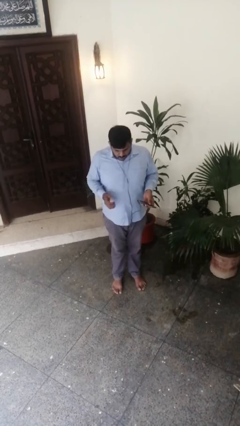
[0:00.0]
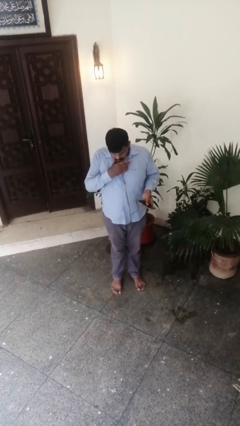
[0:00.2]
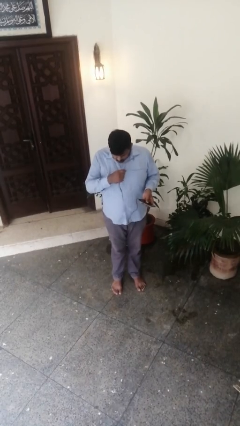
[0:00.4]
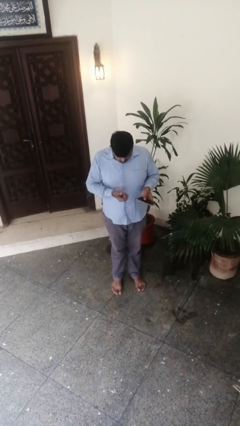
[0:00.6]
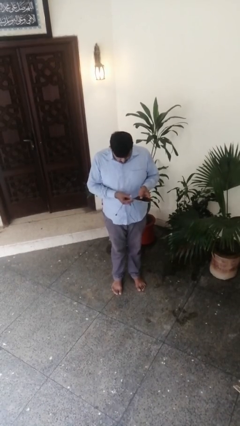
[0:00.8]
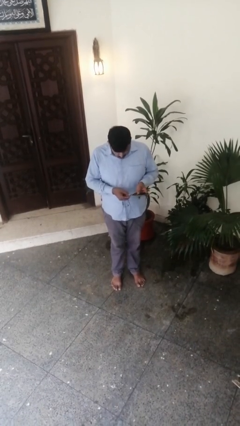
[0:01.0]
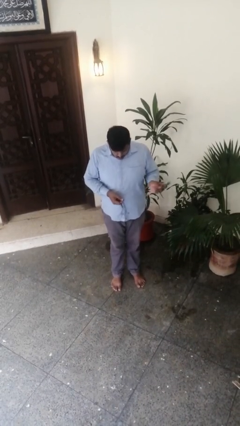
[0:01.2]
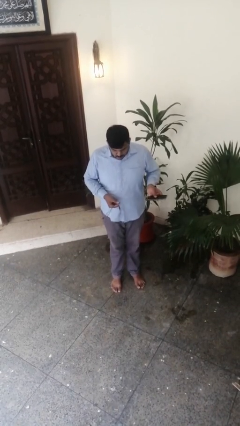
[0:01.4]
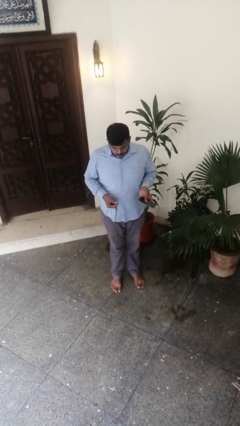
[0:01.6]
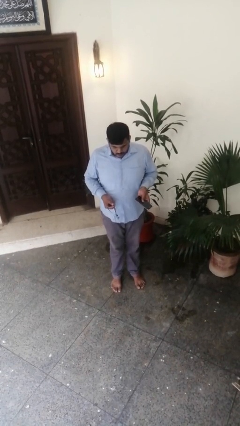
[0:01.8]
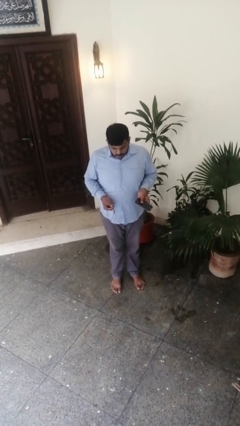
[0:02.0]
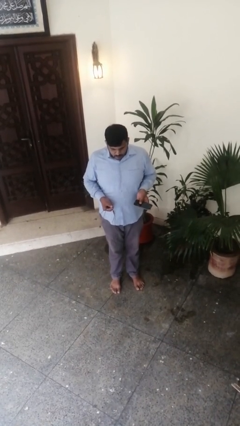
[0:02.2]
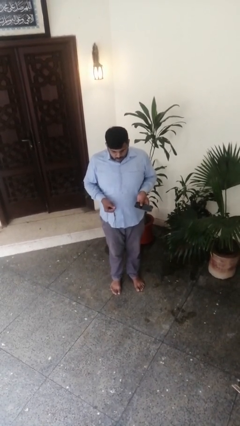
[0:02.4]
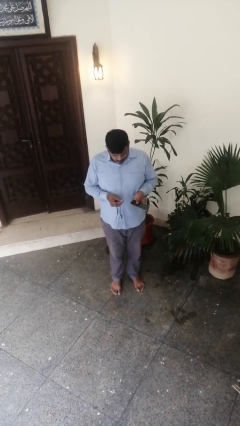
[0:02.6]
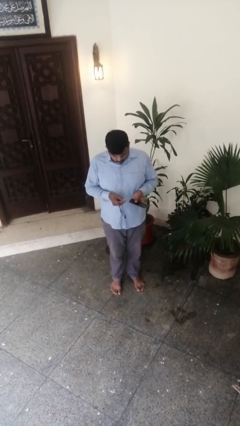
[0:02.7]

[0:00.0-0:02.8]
person takes off headphones

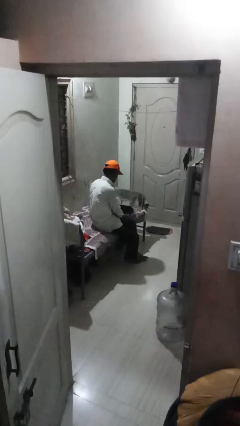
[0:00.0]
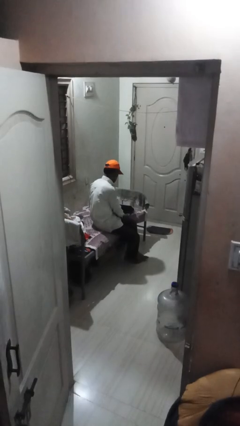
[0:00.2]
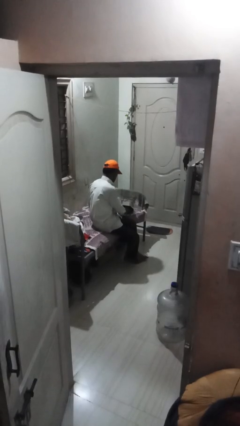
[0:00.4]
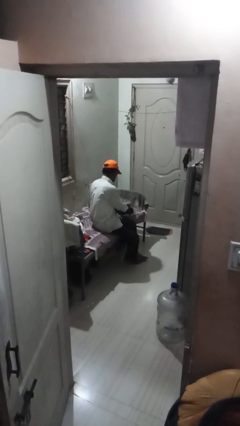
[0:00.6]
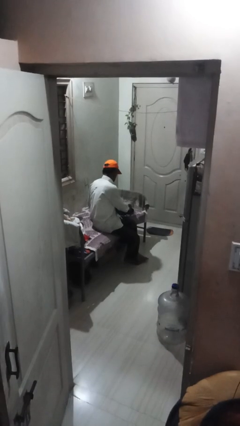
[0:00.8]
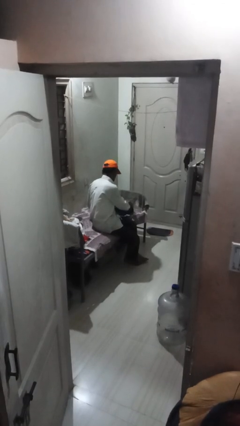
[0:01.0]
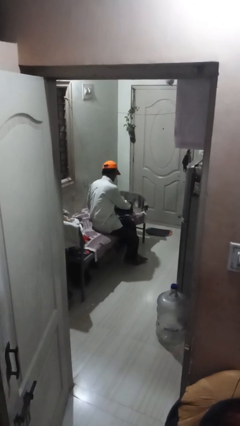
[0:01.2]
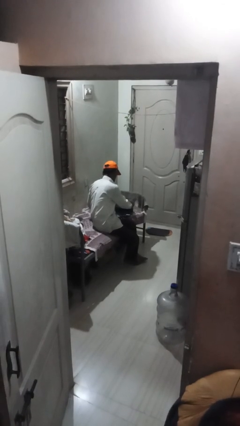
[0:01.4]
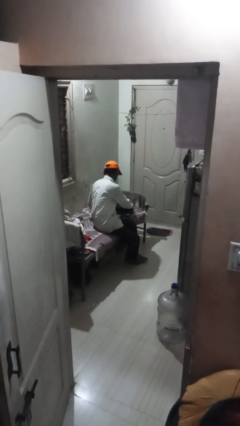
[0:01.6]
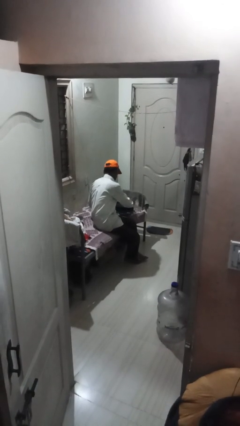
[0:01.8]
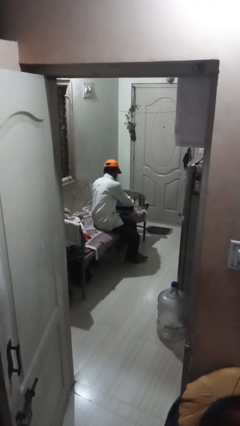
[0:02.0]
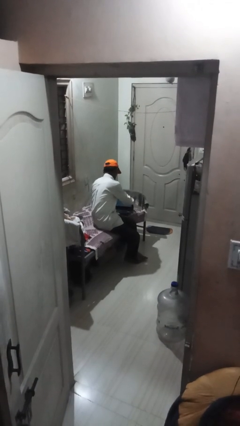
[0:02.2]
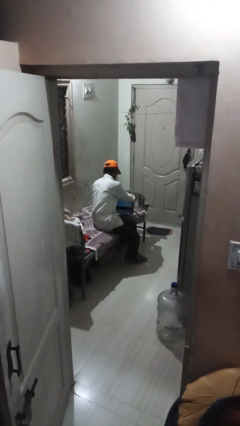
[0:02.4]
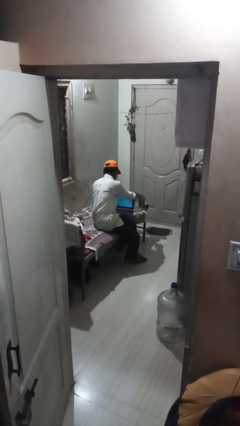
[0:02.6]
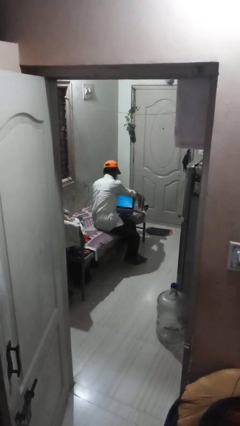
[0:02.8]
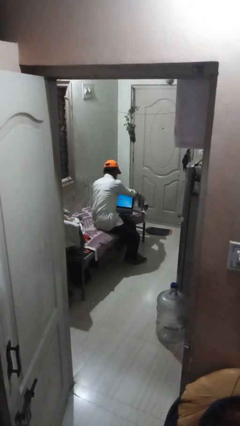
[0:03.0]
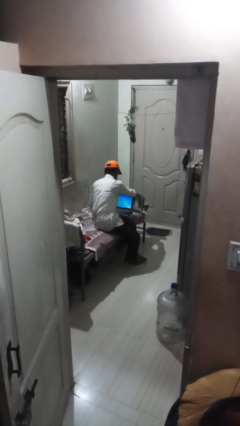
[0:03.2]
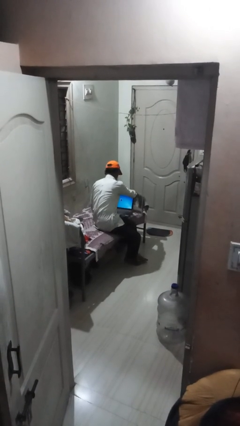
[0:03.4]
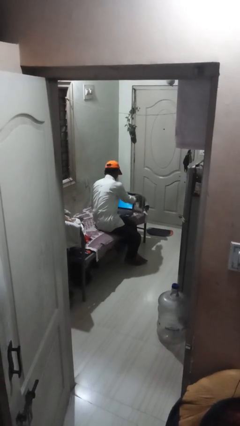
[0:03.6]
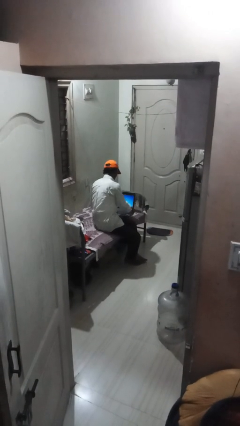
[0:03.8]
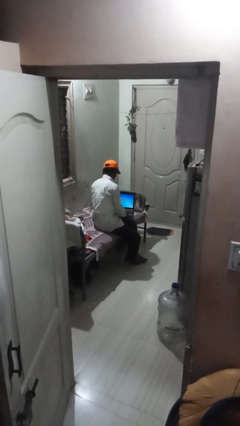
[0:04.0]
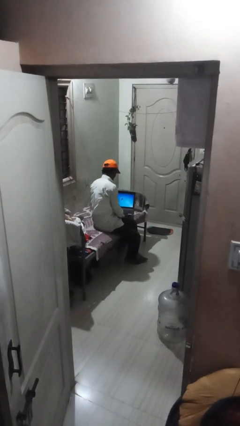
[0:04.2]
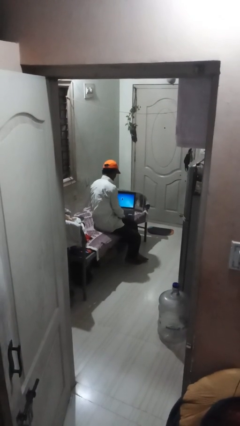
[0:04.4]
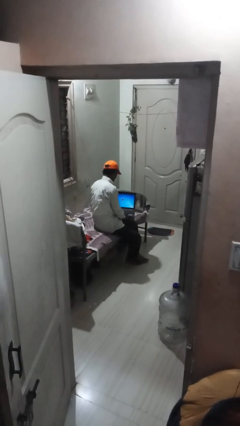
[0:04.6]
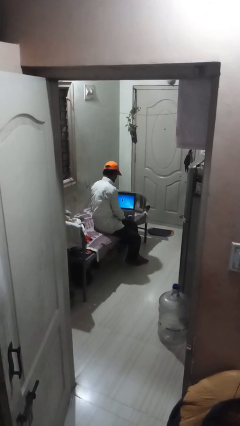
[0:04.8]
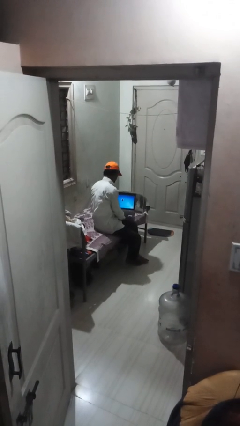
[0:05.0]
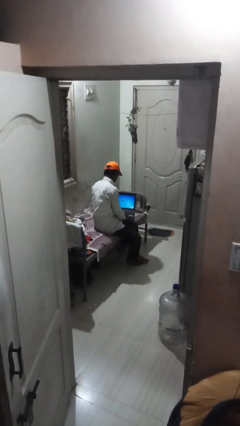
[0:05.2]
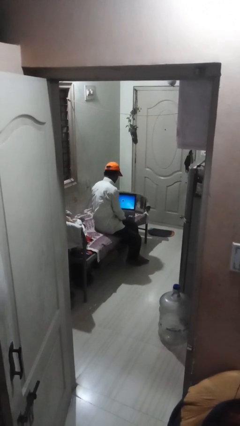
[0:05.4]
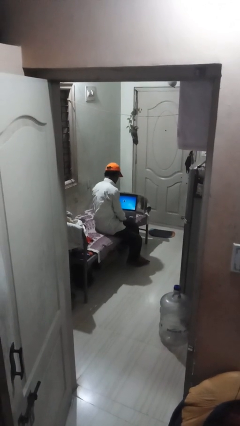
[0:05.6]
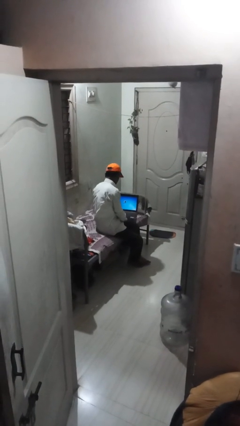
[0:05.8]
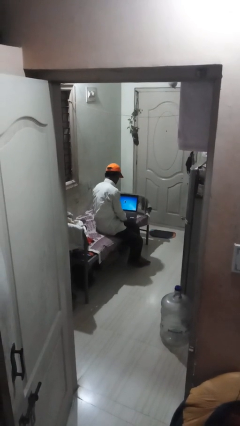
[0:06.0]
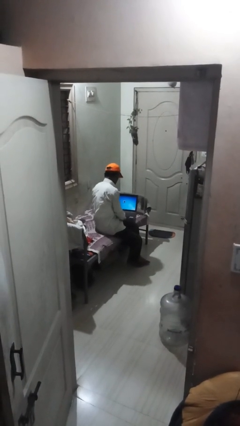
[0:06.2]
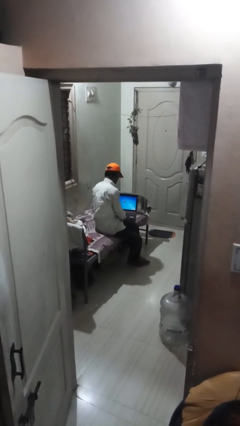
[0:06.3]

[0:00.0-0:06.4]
person opens laptop

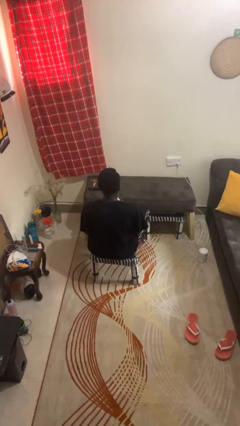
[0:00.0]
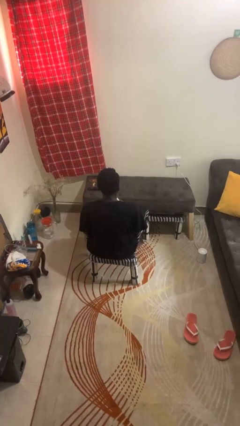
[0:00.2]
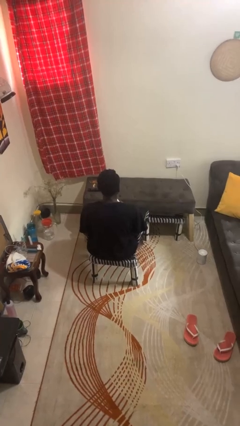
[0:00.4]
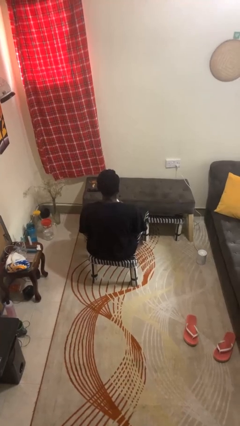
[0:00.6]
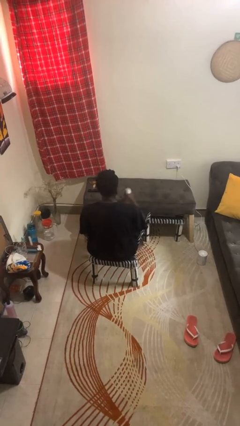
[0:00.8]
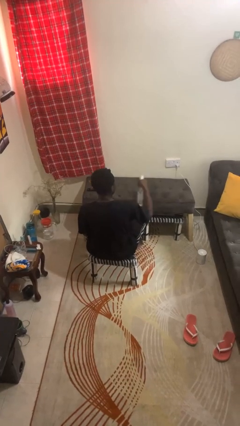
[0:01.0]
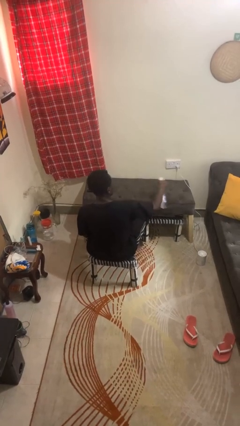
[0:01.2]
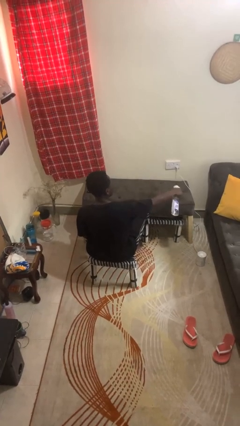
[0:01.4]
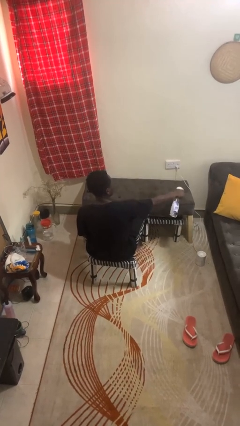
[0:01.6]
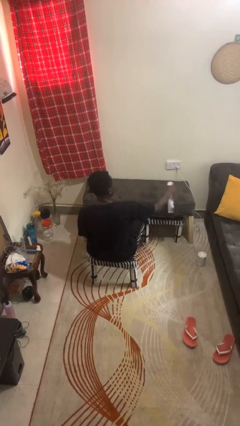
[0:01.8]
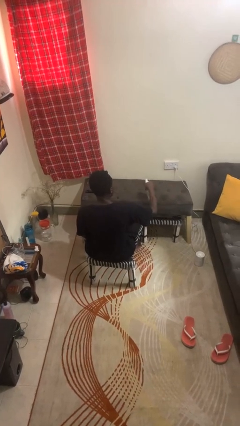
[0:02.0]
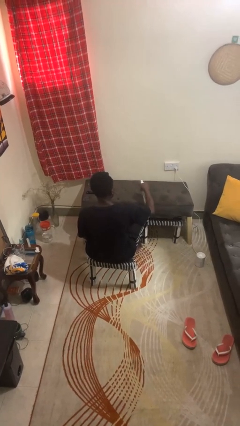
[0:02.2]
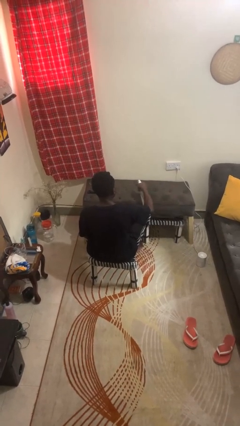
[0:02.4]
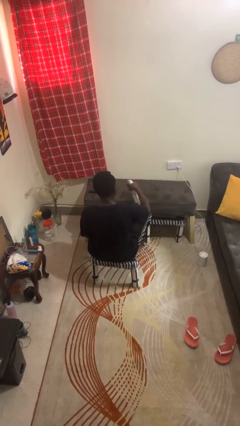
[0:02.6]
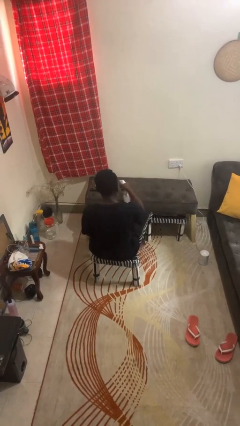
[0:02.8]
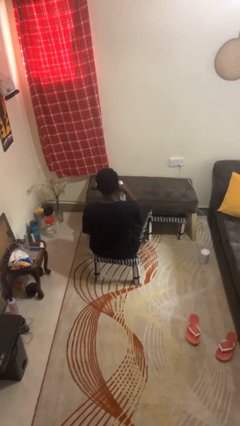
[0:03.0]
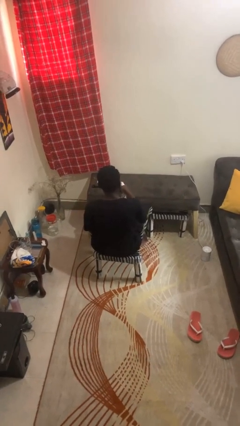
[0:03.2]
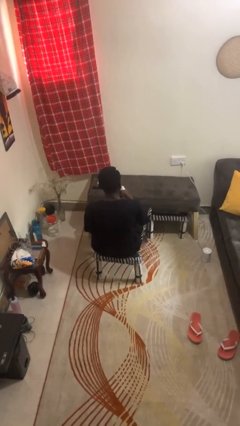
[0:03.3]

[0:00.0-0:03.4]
person sprays from bottle

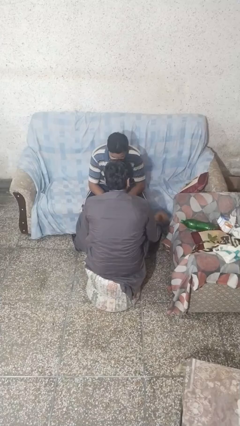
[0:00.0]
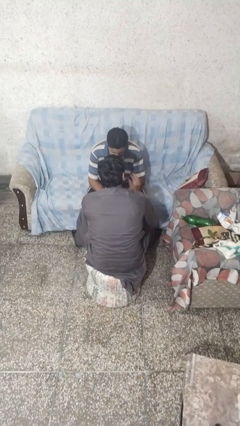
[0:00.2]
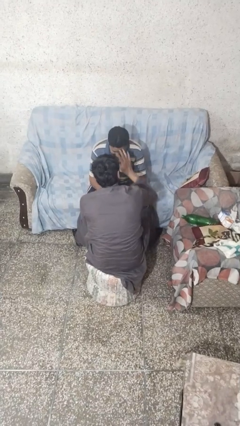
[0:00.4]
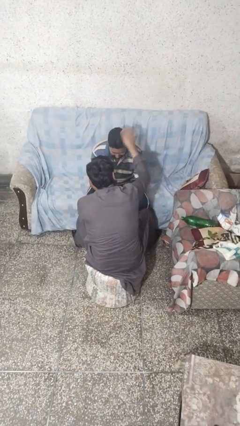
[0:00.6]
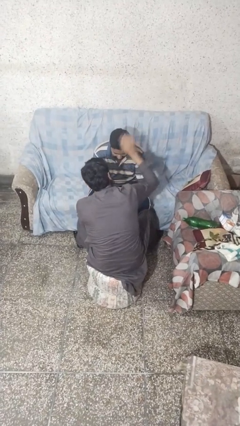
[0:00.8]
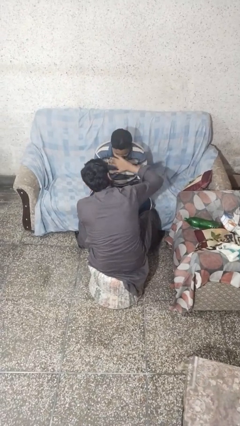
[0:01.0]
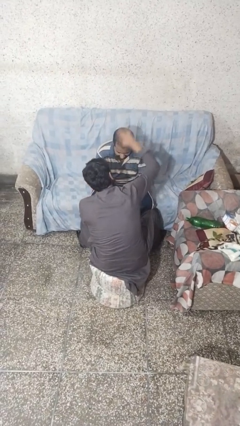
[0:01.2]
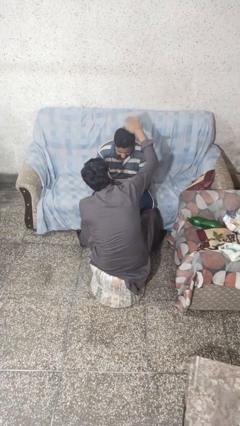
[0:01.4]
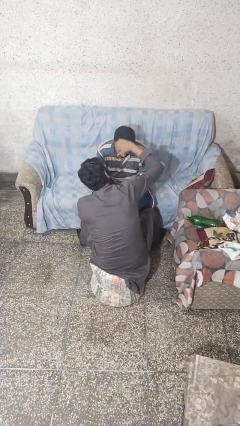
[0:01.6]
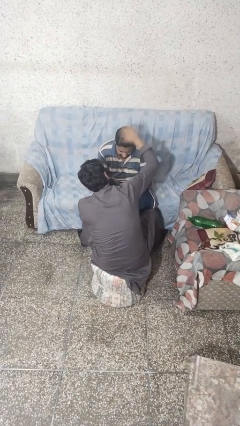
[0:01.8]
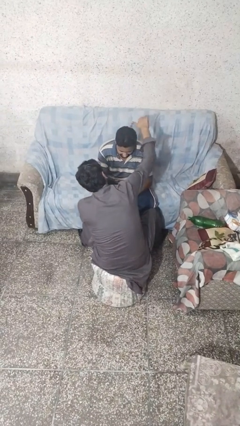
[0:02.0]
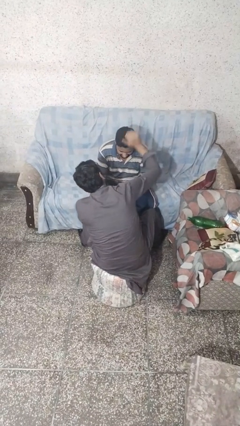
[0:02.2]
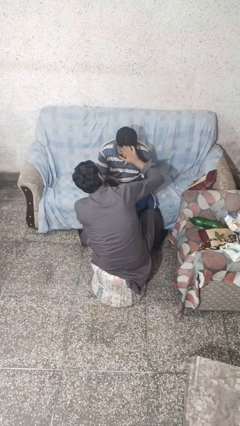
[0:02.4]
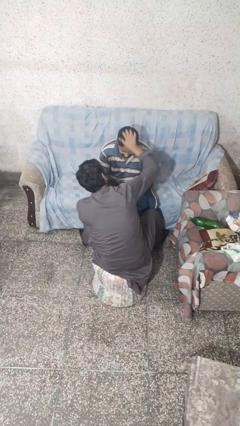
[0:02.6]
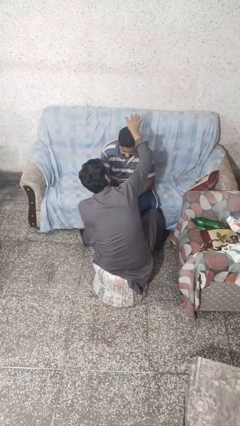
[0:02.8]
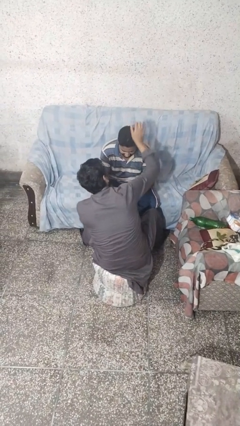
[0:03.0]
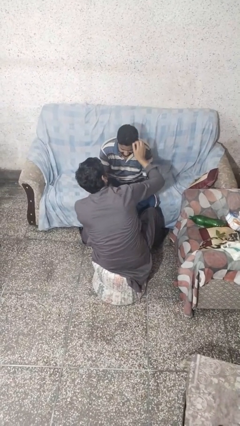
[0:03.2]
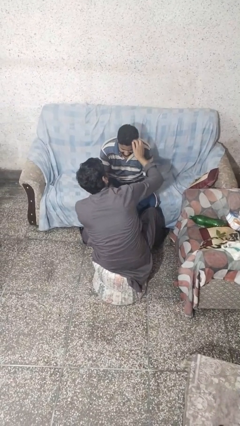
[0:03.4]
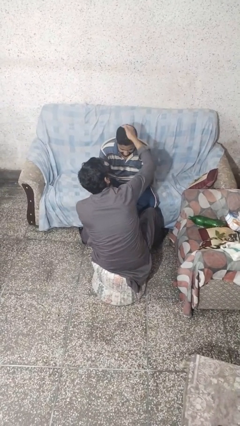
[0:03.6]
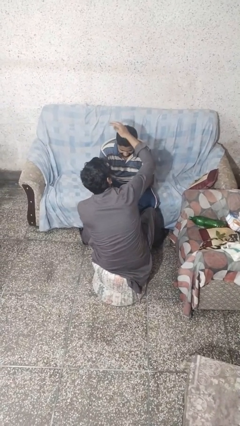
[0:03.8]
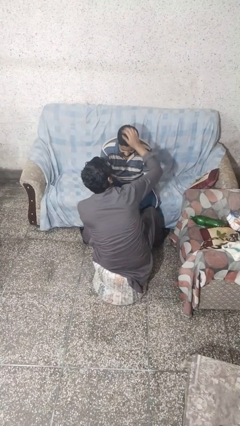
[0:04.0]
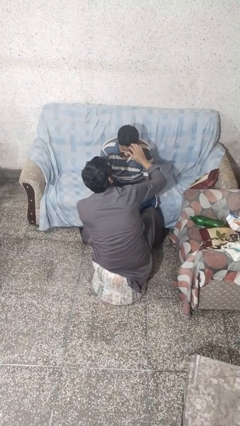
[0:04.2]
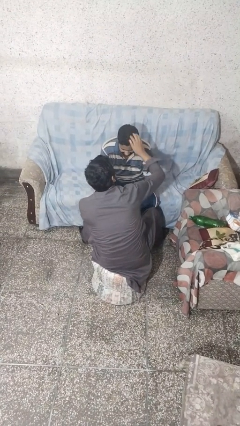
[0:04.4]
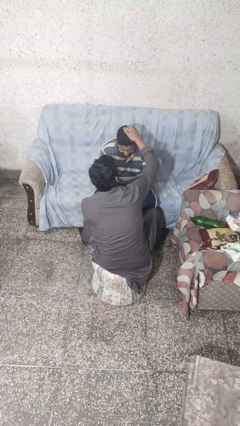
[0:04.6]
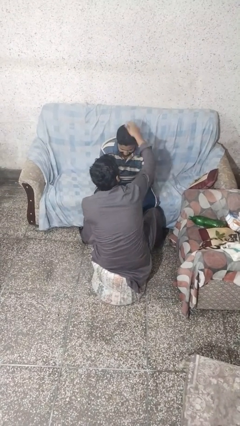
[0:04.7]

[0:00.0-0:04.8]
person braids hair of person

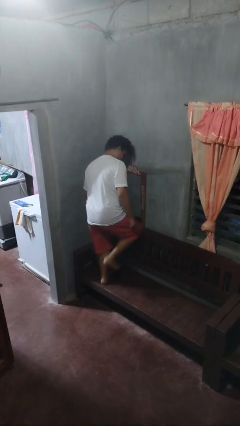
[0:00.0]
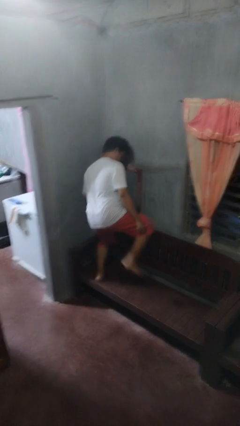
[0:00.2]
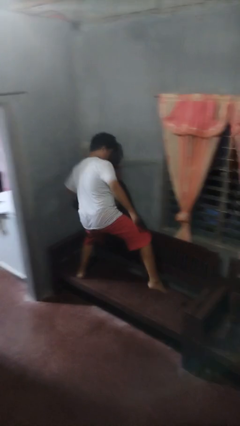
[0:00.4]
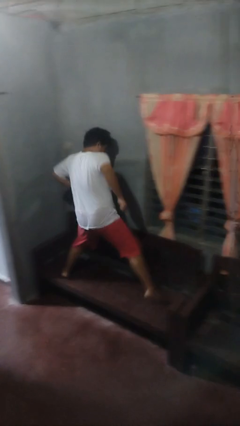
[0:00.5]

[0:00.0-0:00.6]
person jumps on couch
